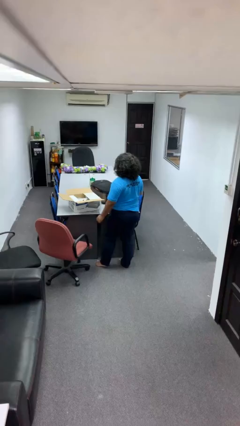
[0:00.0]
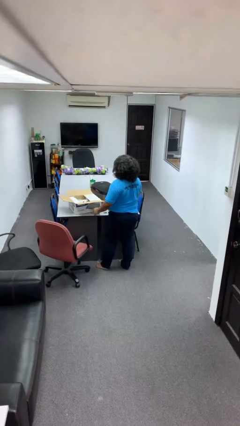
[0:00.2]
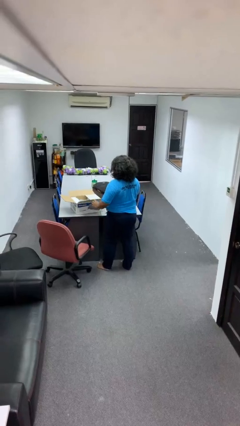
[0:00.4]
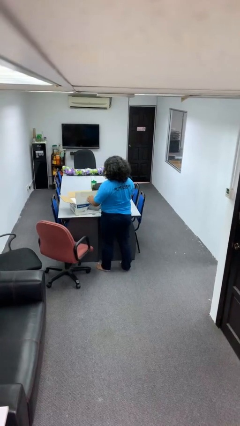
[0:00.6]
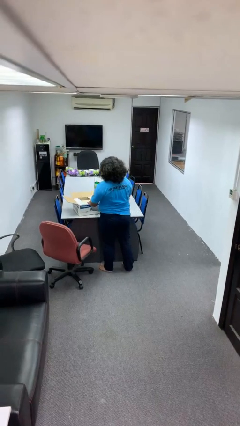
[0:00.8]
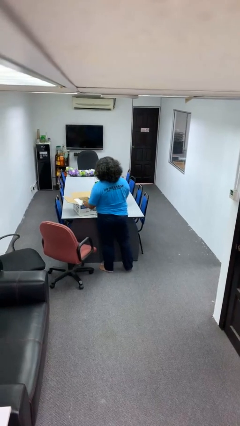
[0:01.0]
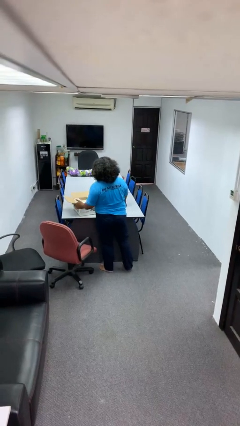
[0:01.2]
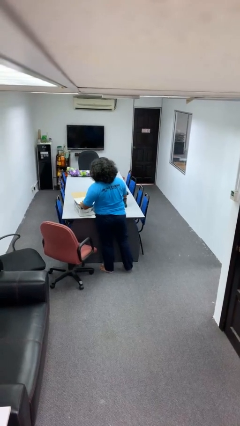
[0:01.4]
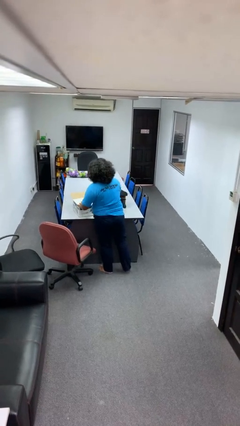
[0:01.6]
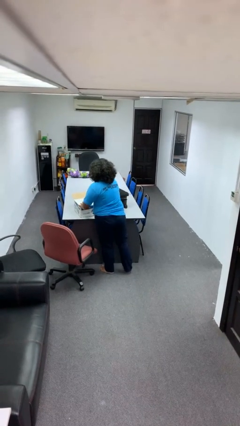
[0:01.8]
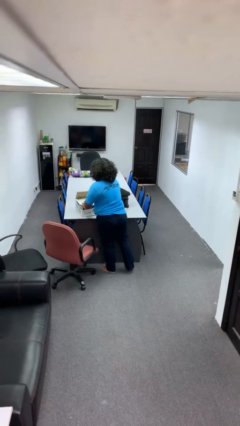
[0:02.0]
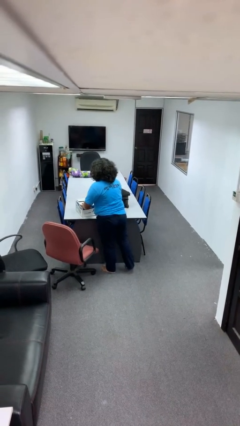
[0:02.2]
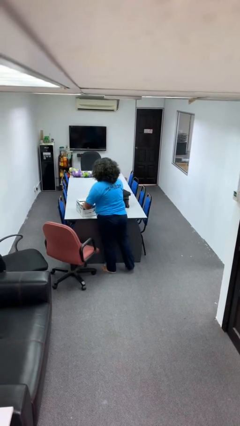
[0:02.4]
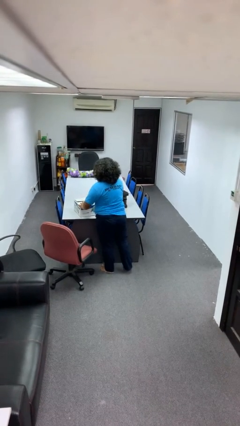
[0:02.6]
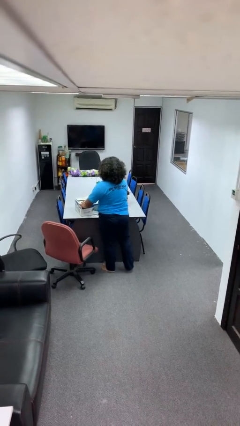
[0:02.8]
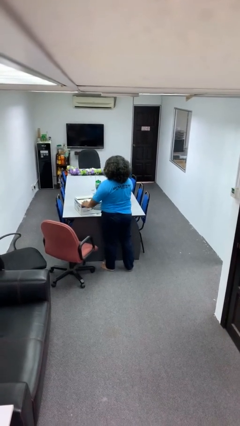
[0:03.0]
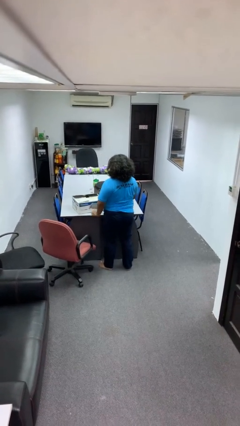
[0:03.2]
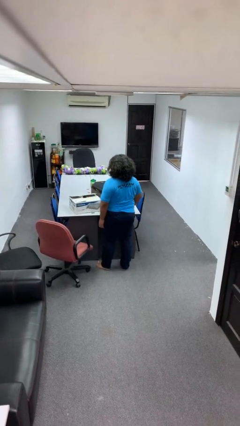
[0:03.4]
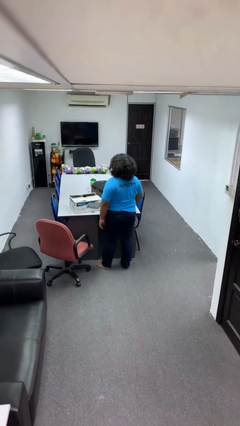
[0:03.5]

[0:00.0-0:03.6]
person closes box

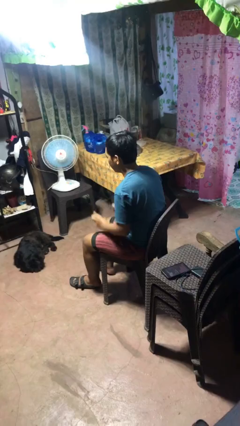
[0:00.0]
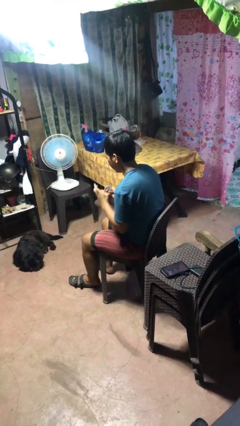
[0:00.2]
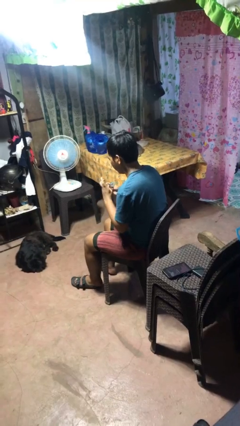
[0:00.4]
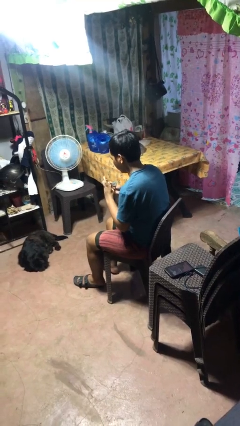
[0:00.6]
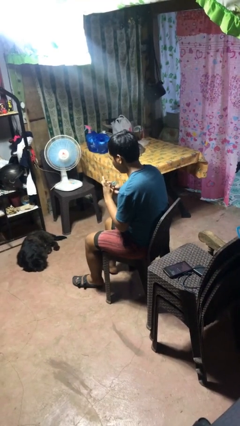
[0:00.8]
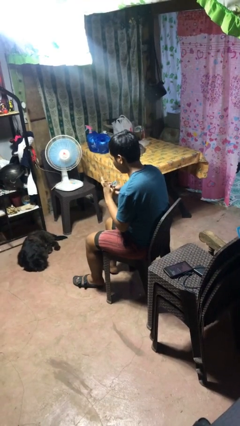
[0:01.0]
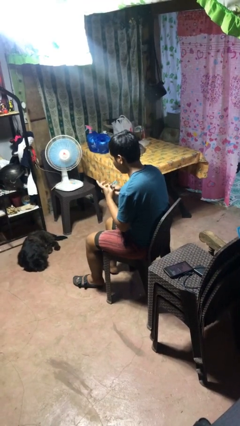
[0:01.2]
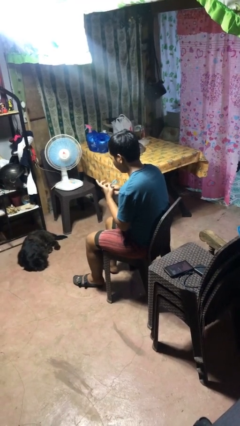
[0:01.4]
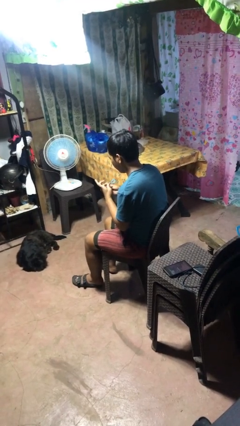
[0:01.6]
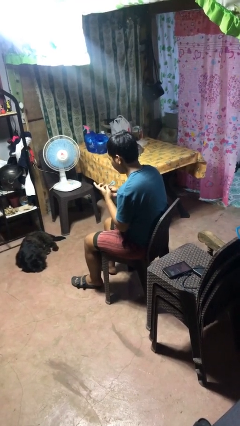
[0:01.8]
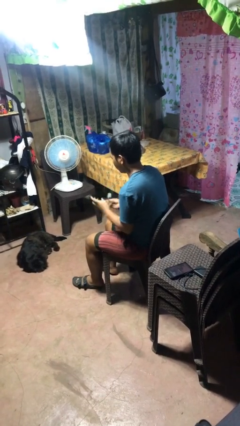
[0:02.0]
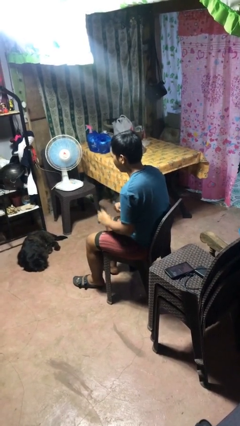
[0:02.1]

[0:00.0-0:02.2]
person files fingernails

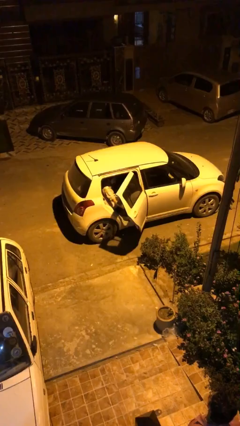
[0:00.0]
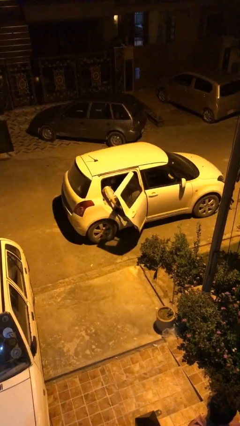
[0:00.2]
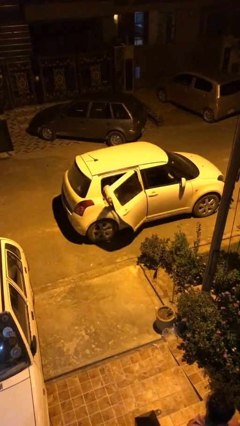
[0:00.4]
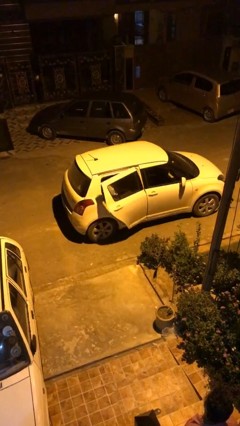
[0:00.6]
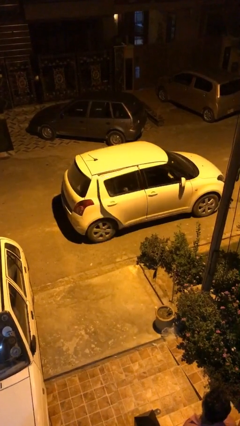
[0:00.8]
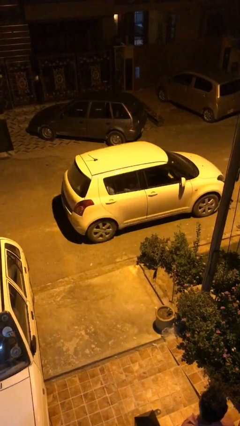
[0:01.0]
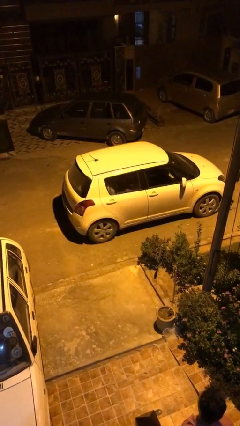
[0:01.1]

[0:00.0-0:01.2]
person closes car door

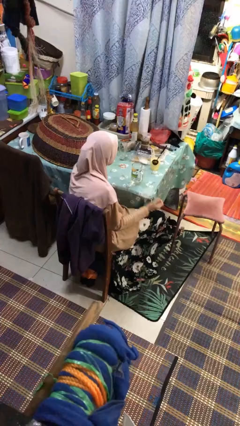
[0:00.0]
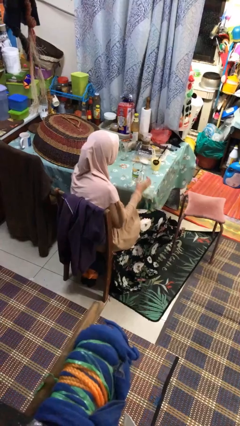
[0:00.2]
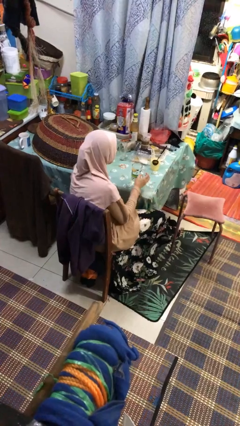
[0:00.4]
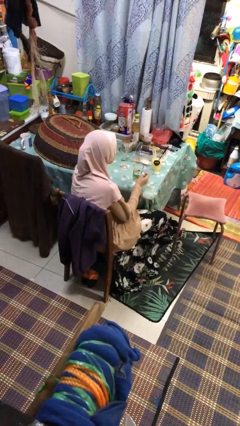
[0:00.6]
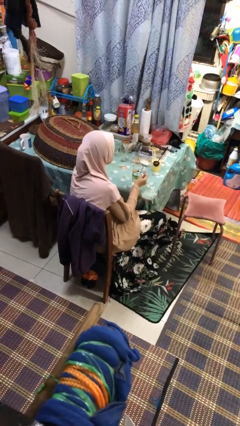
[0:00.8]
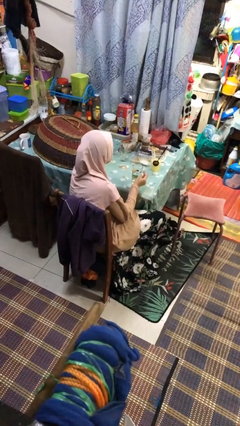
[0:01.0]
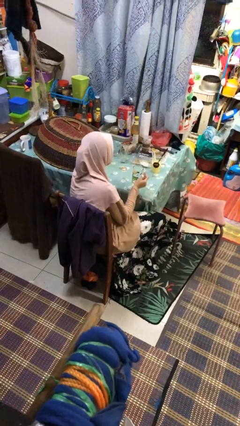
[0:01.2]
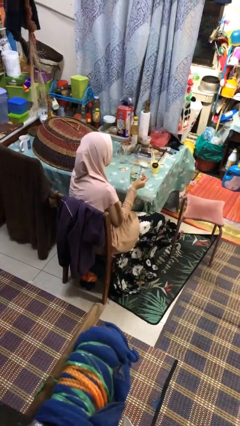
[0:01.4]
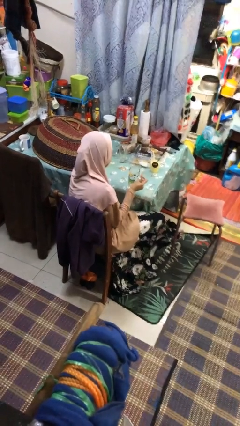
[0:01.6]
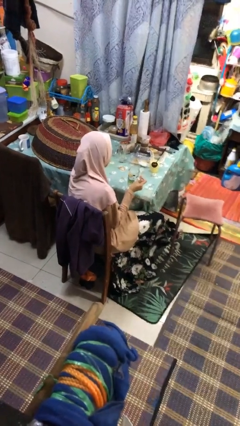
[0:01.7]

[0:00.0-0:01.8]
person picks up object from table

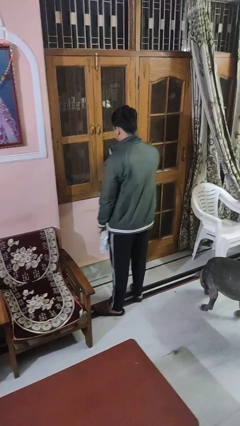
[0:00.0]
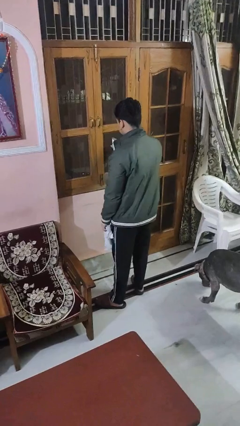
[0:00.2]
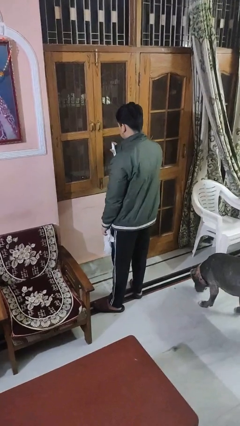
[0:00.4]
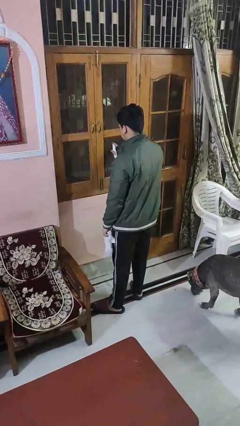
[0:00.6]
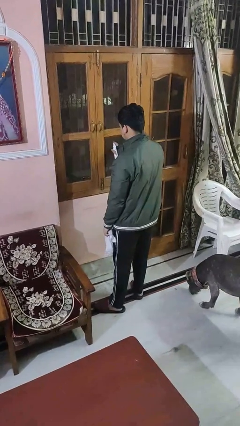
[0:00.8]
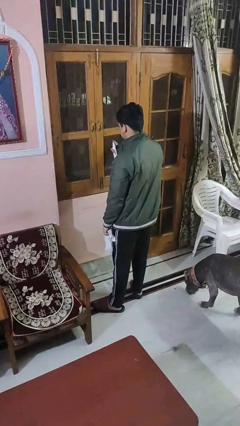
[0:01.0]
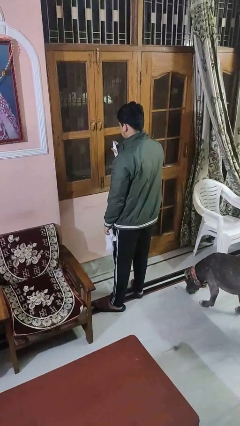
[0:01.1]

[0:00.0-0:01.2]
person sprays from bottle

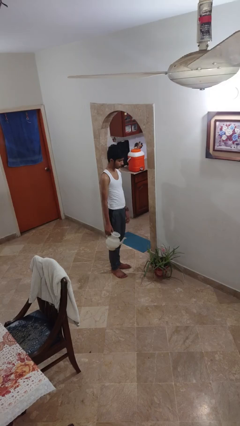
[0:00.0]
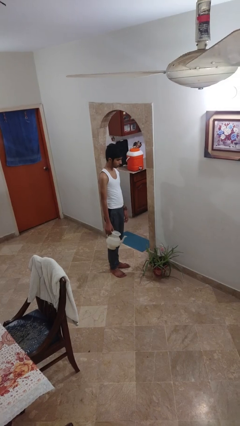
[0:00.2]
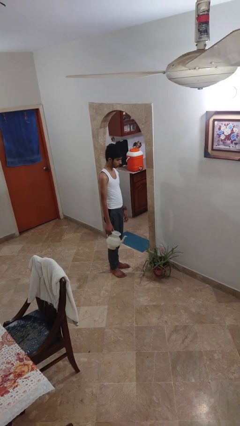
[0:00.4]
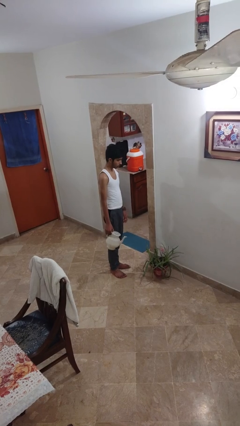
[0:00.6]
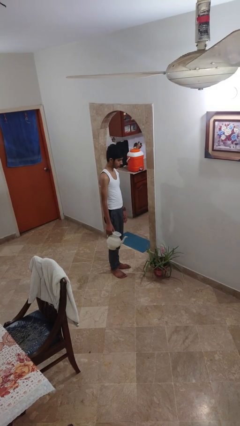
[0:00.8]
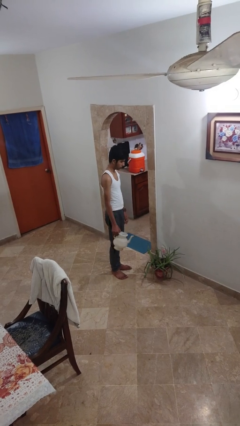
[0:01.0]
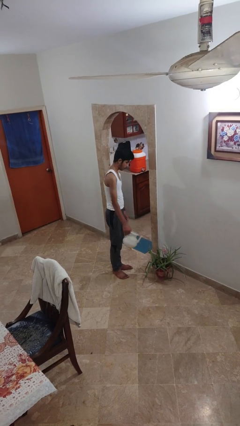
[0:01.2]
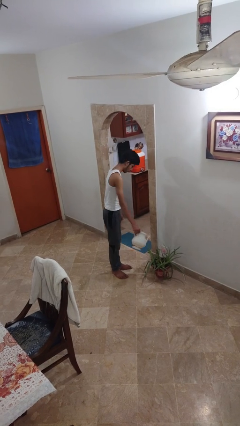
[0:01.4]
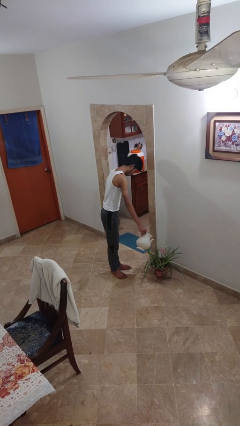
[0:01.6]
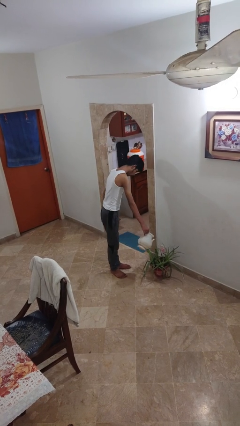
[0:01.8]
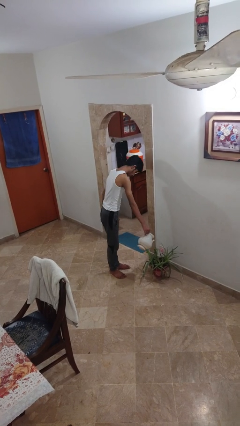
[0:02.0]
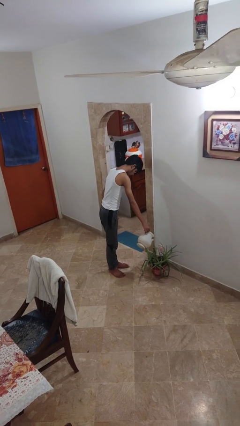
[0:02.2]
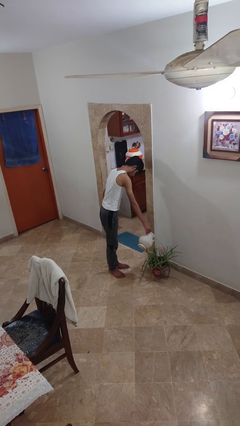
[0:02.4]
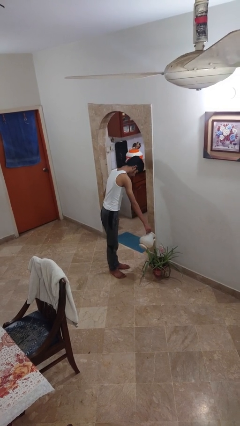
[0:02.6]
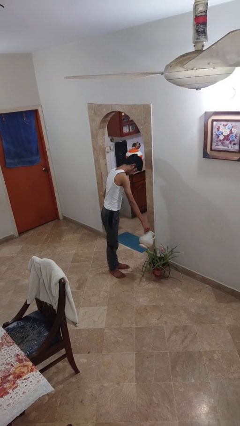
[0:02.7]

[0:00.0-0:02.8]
person waters houseplant

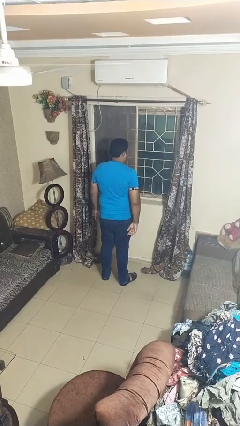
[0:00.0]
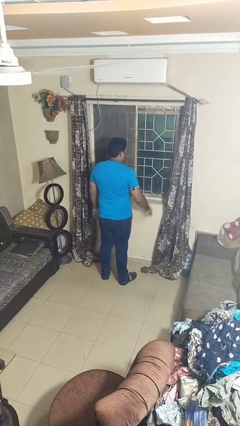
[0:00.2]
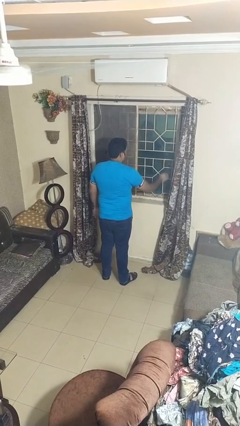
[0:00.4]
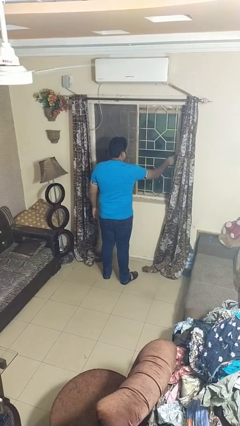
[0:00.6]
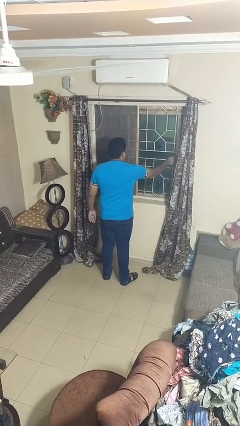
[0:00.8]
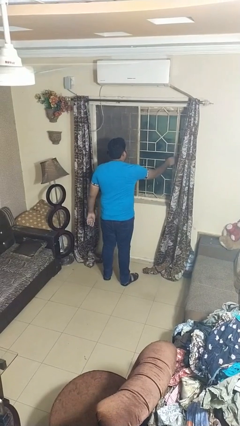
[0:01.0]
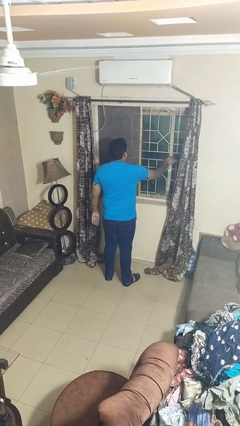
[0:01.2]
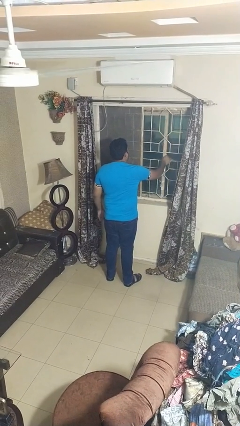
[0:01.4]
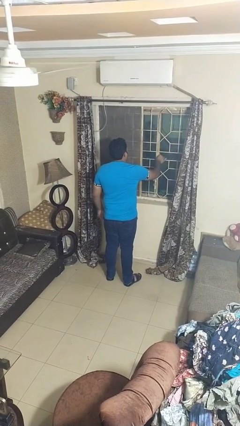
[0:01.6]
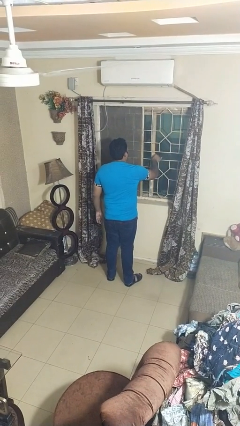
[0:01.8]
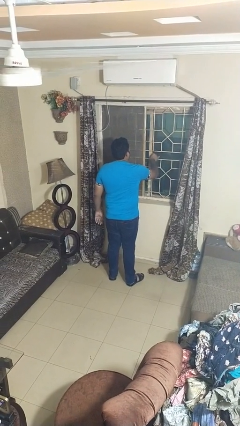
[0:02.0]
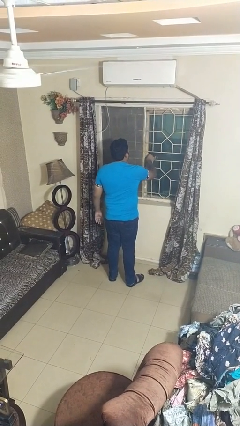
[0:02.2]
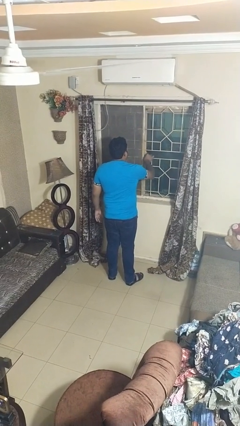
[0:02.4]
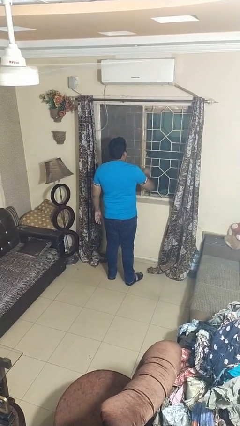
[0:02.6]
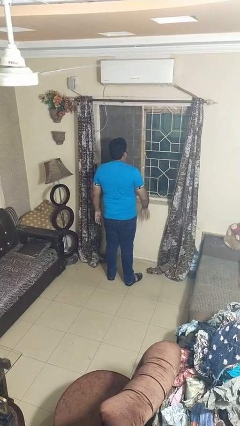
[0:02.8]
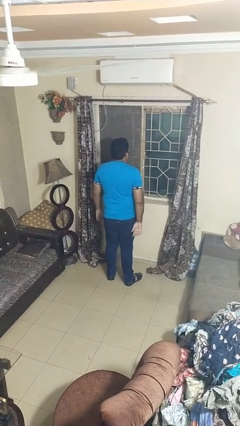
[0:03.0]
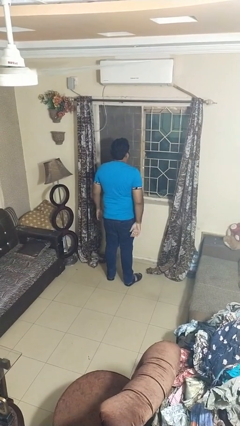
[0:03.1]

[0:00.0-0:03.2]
person closes home window

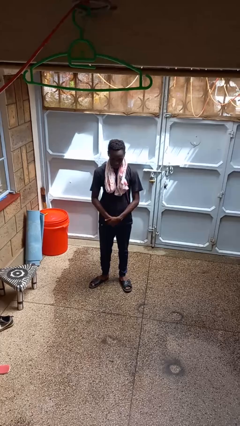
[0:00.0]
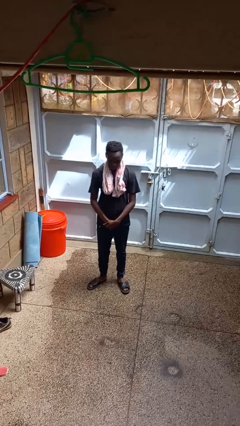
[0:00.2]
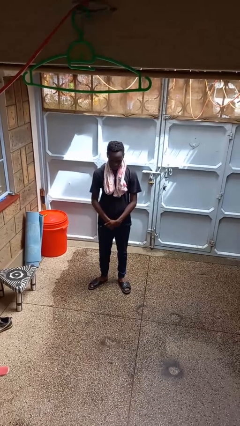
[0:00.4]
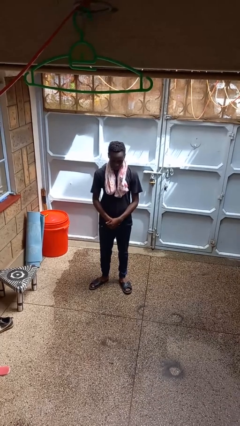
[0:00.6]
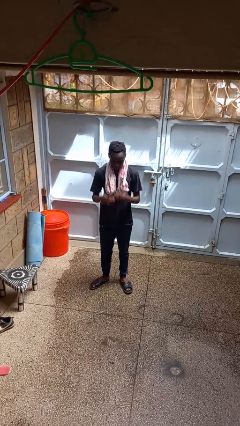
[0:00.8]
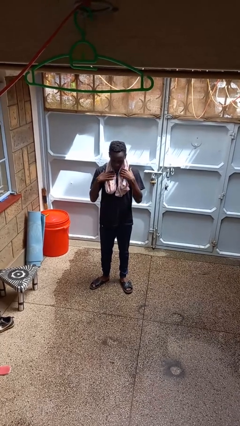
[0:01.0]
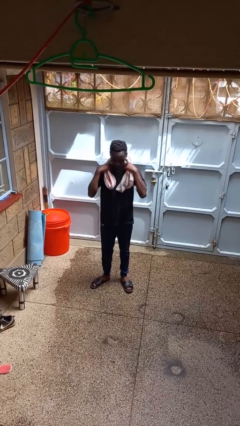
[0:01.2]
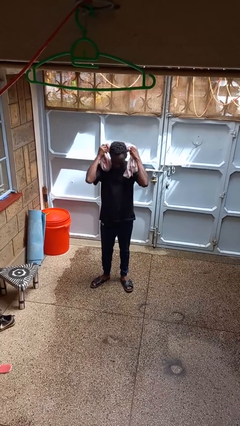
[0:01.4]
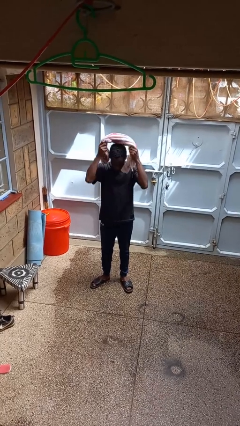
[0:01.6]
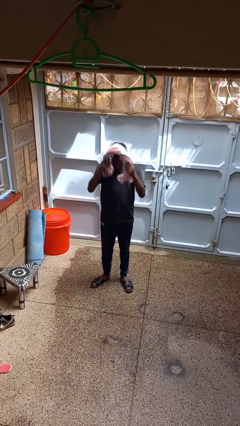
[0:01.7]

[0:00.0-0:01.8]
person takes off scarf
